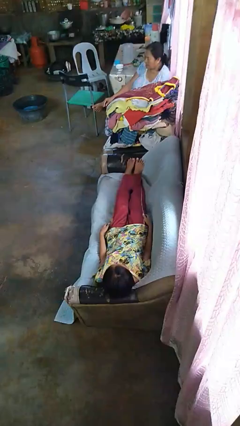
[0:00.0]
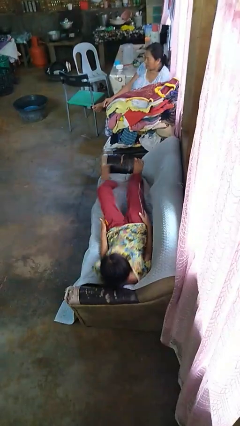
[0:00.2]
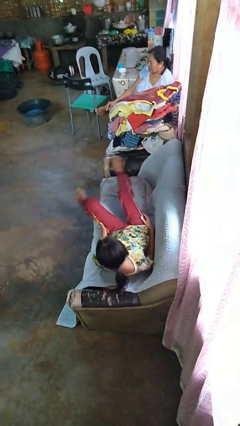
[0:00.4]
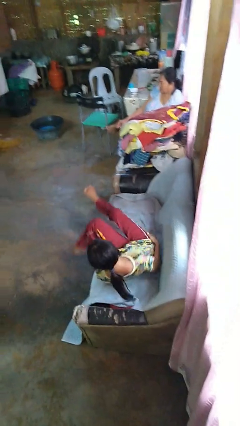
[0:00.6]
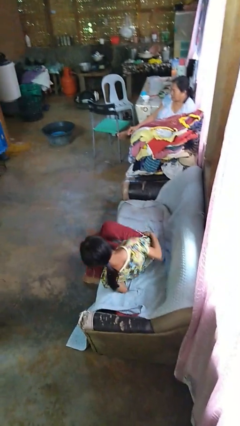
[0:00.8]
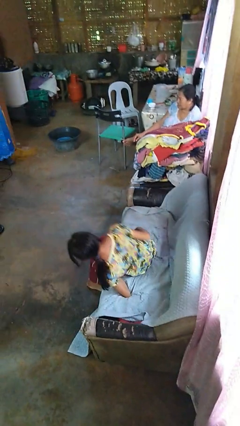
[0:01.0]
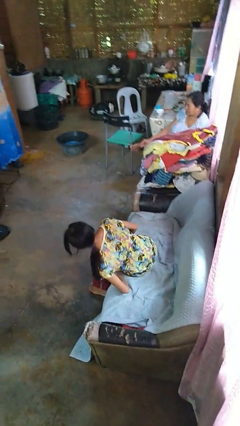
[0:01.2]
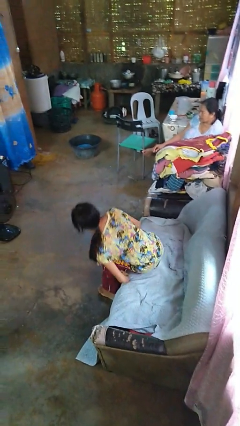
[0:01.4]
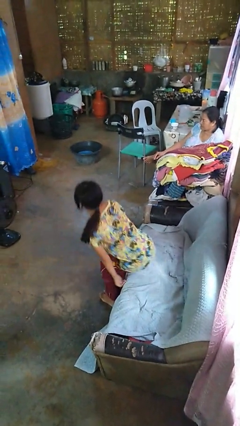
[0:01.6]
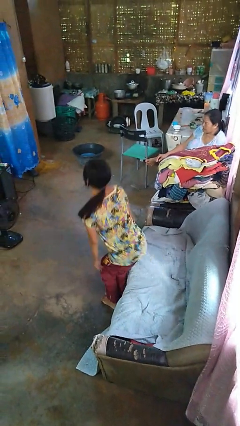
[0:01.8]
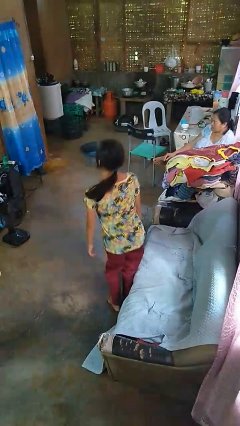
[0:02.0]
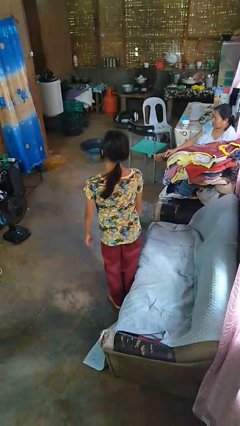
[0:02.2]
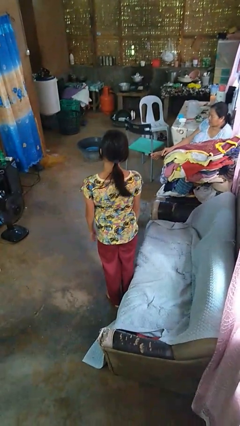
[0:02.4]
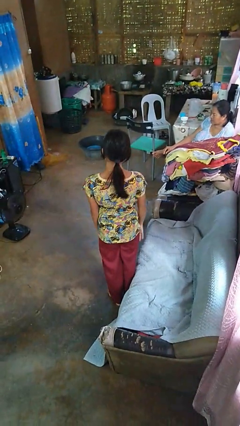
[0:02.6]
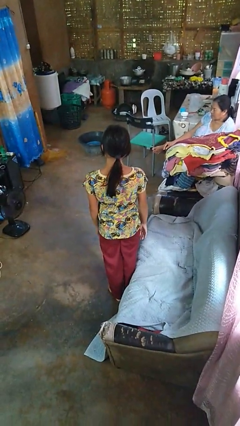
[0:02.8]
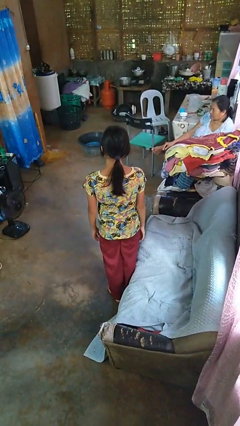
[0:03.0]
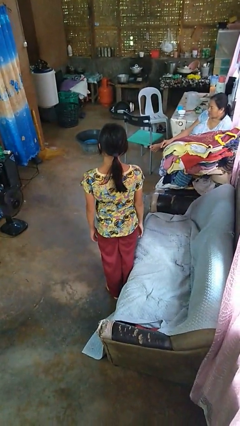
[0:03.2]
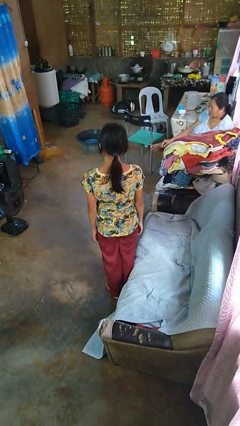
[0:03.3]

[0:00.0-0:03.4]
person stands up

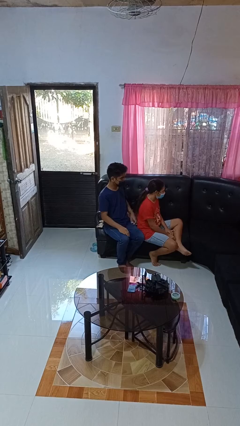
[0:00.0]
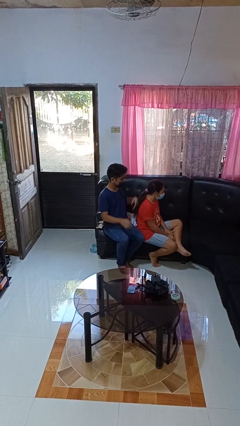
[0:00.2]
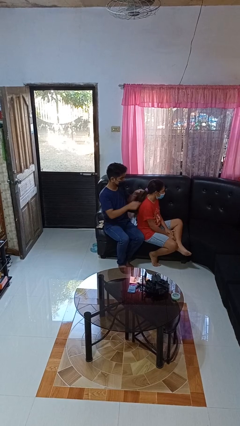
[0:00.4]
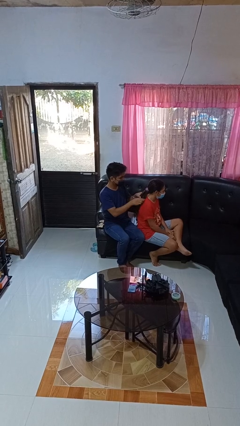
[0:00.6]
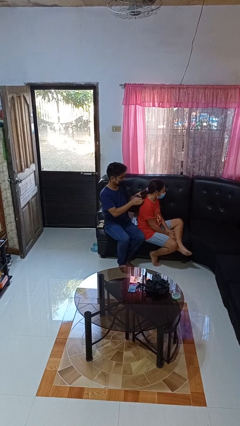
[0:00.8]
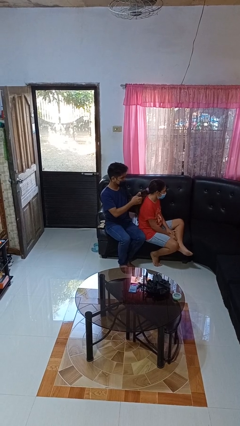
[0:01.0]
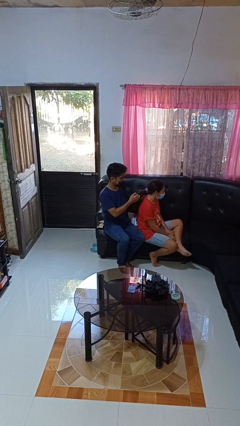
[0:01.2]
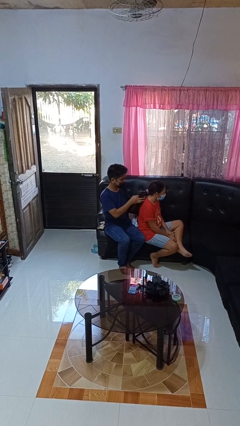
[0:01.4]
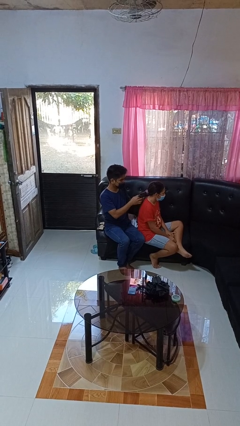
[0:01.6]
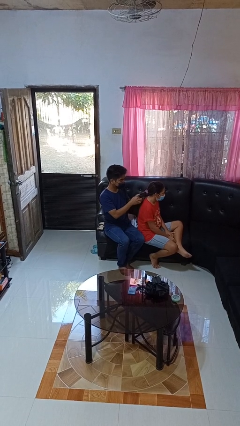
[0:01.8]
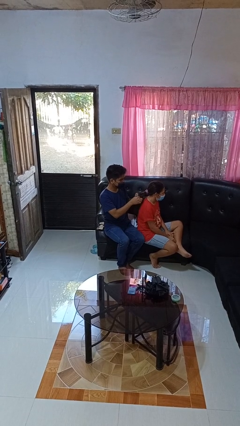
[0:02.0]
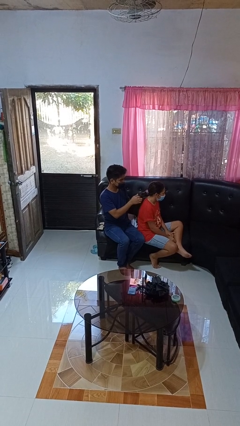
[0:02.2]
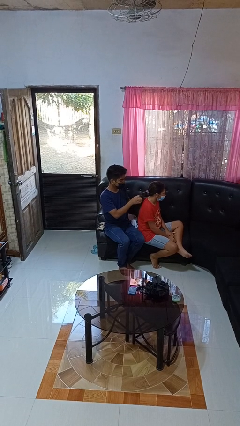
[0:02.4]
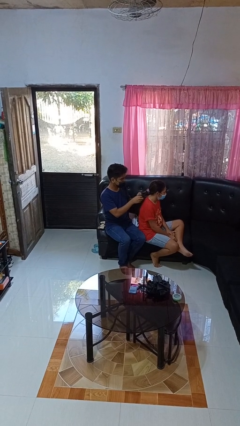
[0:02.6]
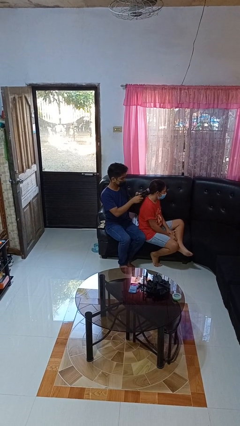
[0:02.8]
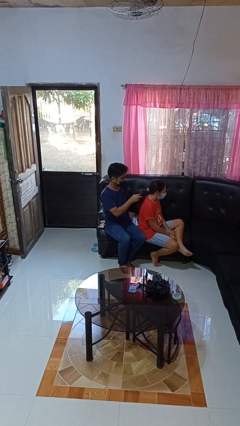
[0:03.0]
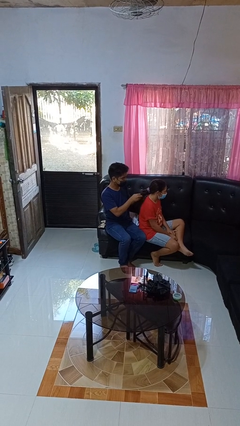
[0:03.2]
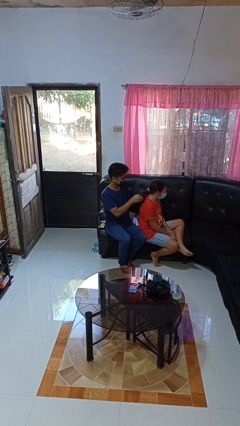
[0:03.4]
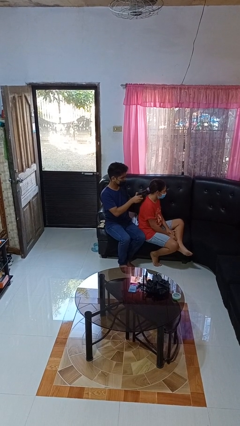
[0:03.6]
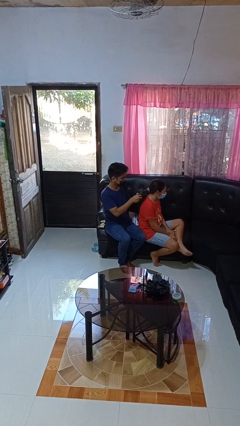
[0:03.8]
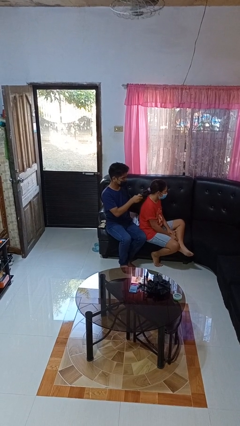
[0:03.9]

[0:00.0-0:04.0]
person braids hair of person

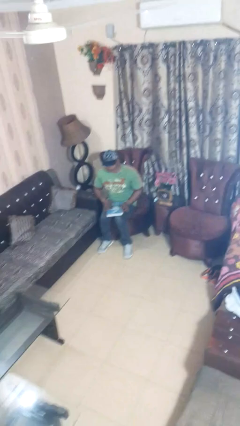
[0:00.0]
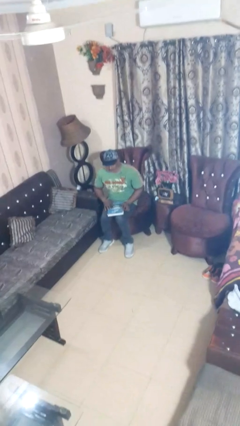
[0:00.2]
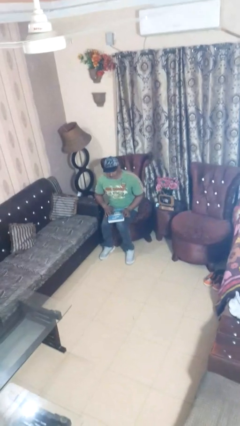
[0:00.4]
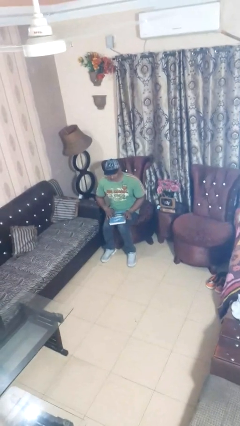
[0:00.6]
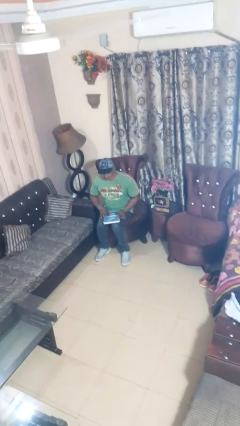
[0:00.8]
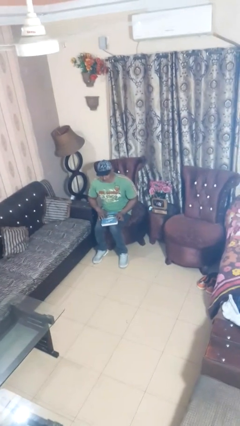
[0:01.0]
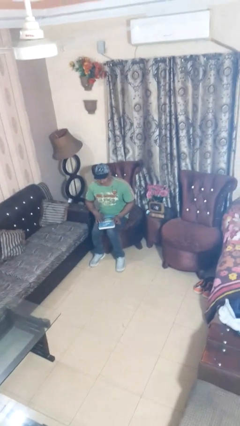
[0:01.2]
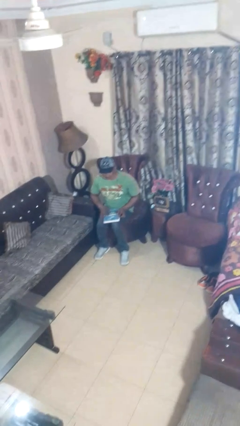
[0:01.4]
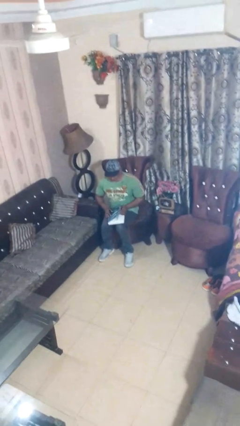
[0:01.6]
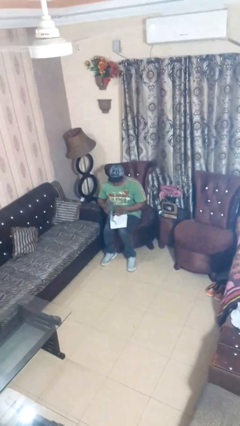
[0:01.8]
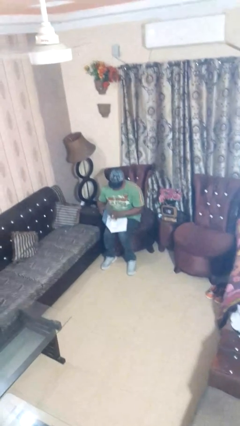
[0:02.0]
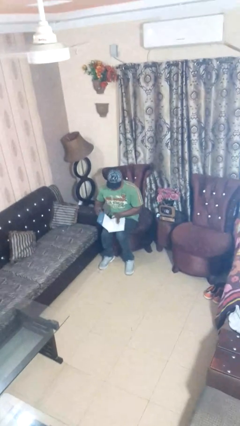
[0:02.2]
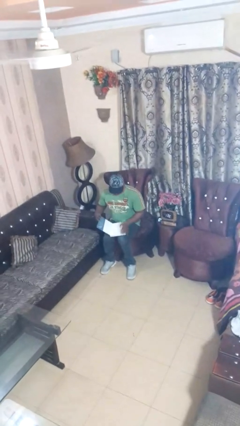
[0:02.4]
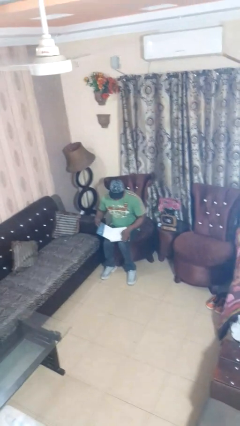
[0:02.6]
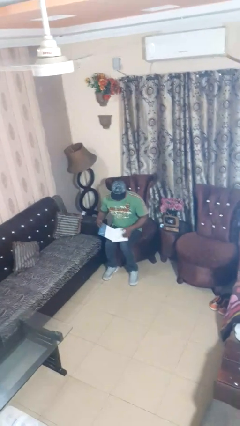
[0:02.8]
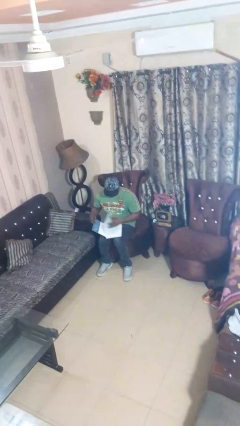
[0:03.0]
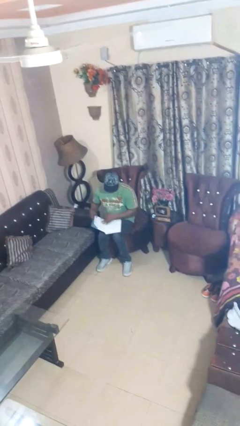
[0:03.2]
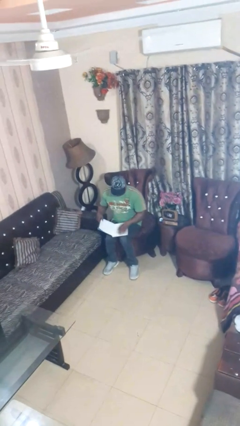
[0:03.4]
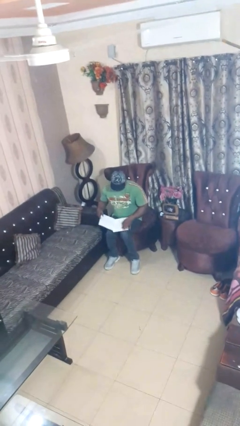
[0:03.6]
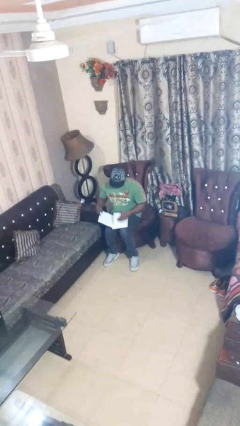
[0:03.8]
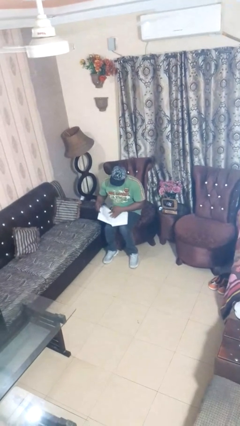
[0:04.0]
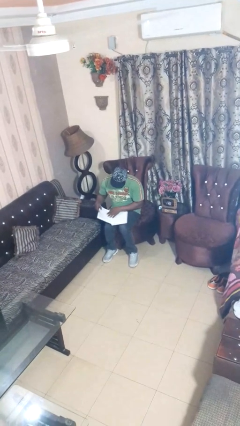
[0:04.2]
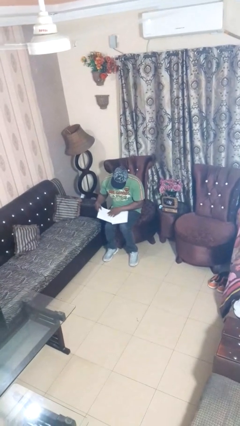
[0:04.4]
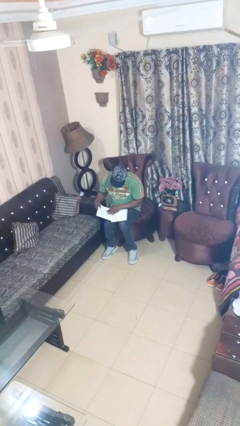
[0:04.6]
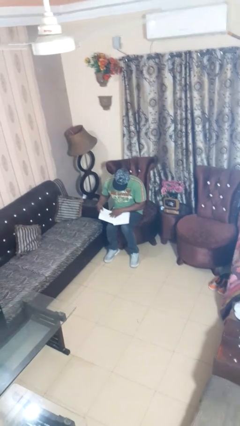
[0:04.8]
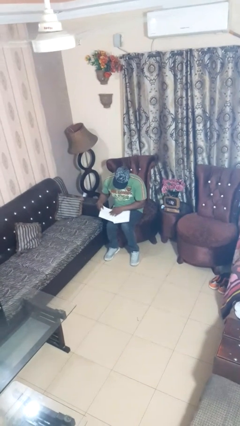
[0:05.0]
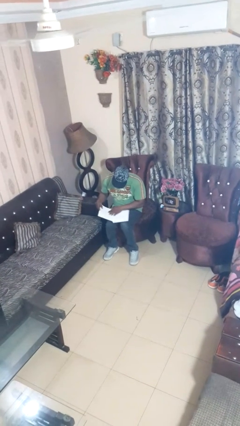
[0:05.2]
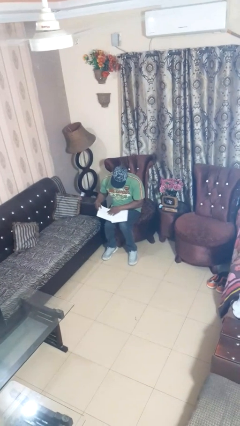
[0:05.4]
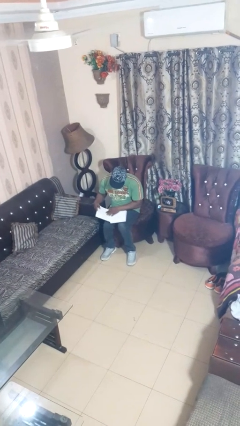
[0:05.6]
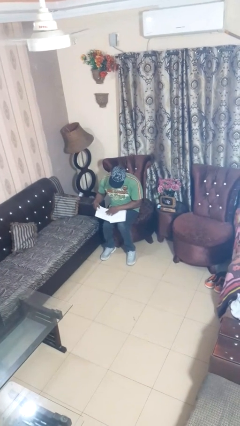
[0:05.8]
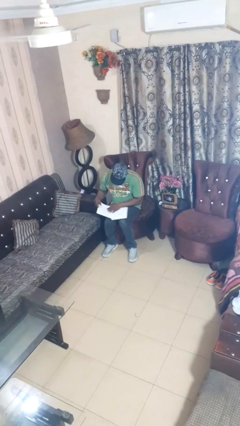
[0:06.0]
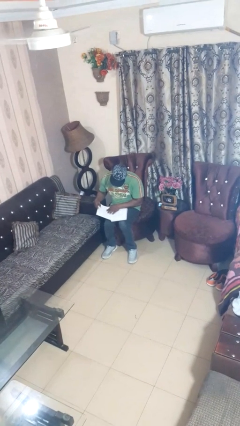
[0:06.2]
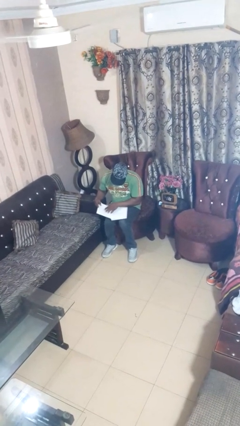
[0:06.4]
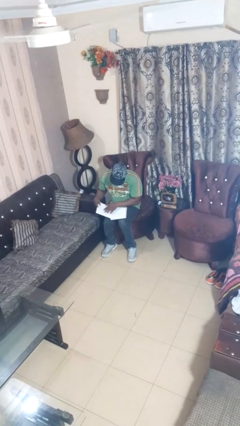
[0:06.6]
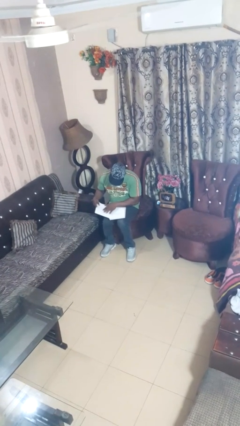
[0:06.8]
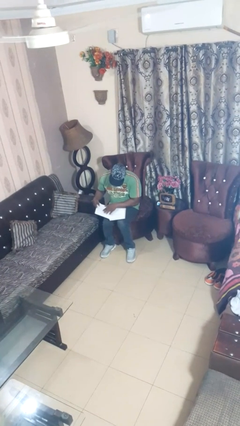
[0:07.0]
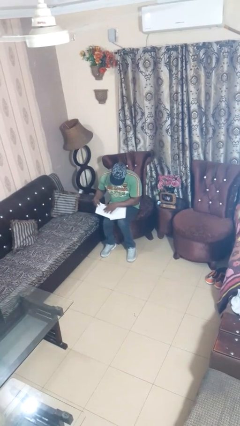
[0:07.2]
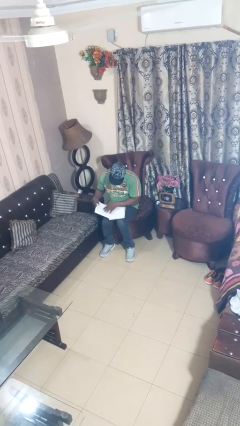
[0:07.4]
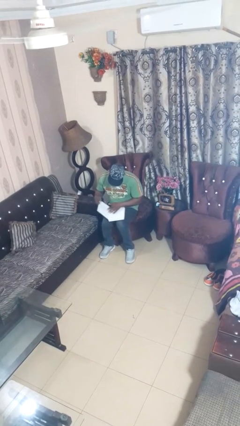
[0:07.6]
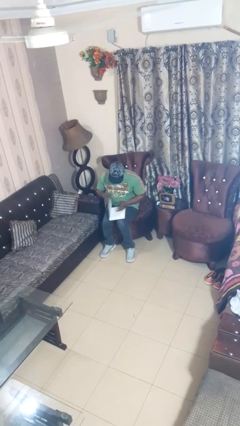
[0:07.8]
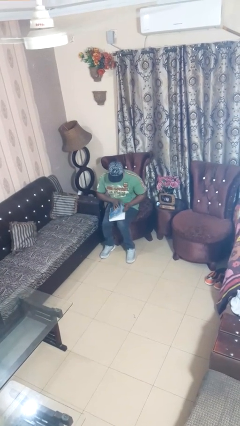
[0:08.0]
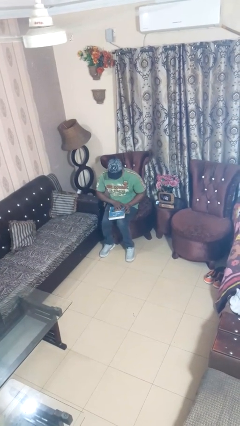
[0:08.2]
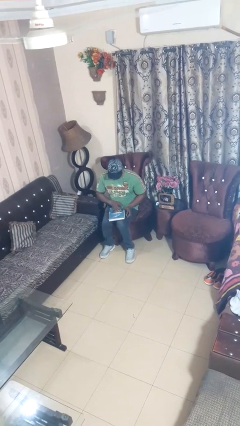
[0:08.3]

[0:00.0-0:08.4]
person reads magazine

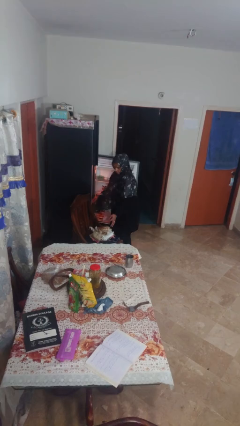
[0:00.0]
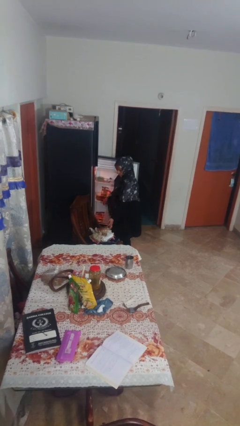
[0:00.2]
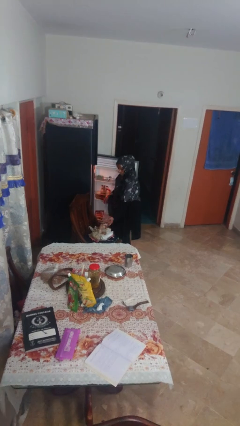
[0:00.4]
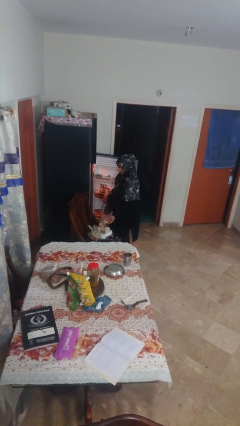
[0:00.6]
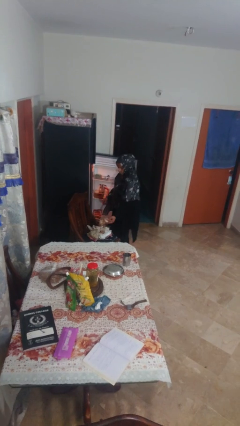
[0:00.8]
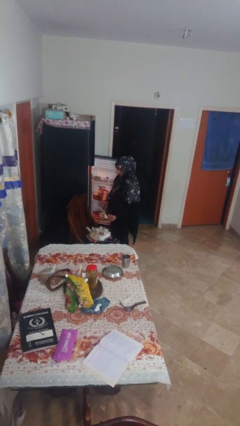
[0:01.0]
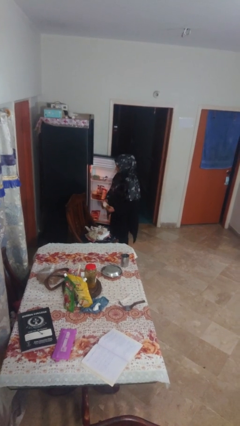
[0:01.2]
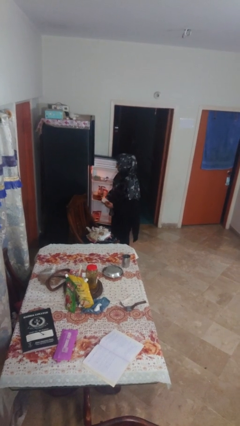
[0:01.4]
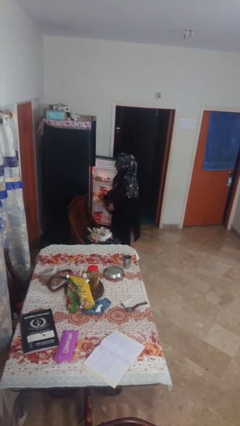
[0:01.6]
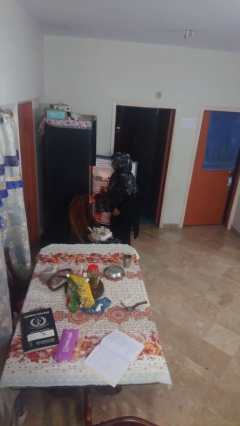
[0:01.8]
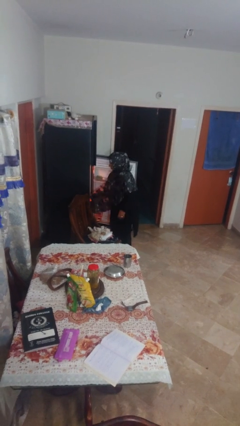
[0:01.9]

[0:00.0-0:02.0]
person loads groceries into refrigerator
